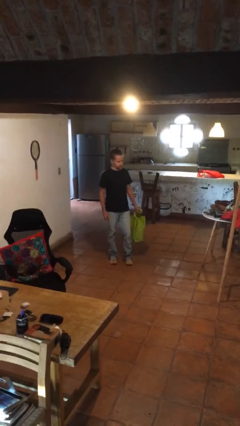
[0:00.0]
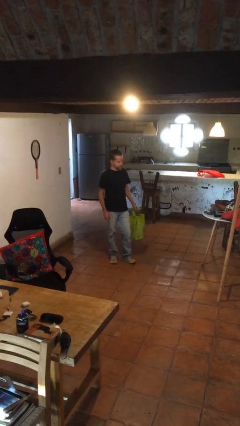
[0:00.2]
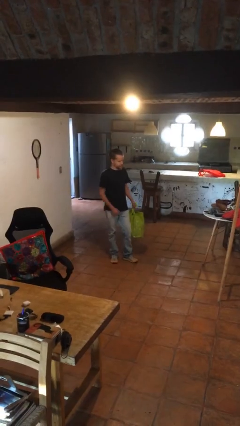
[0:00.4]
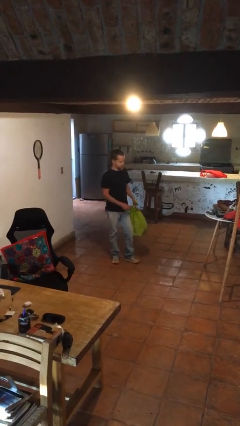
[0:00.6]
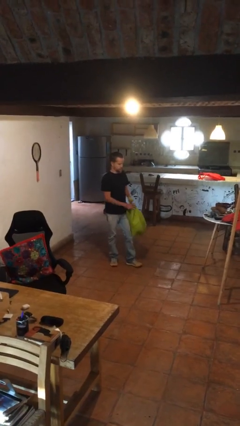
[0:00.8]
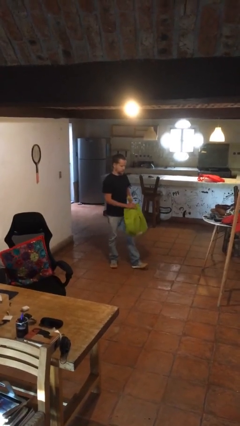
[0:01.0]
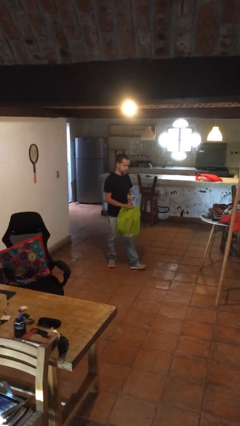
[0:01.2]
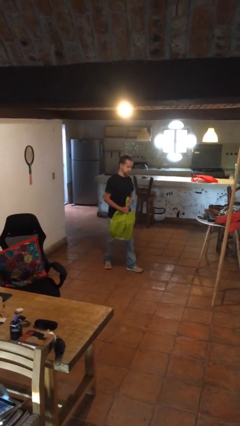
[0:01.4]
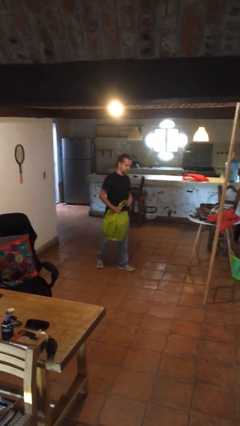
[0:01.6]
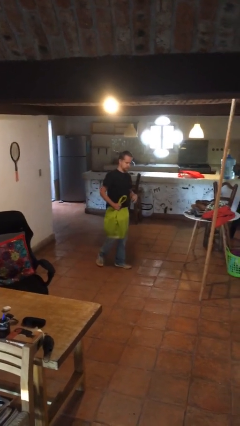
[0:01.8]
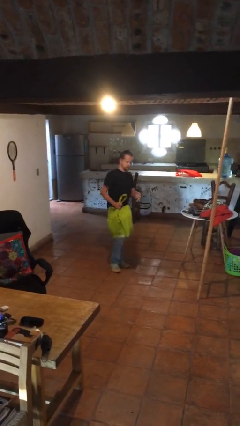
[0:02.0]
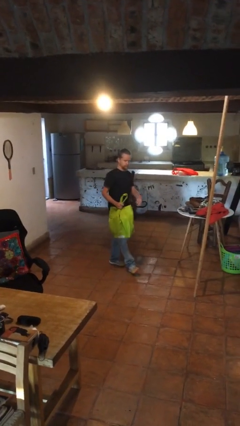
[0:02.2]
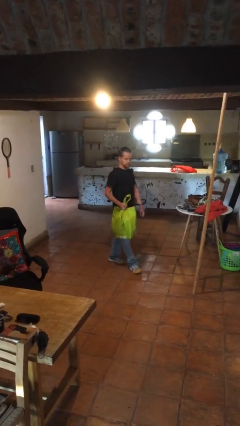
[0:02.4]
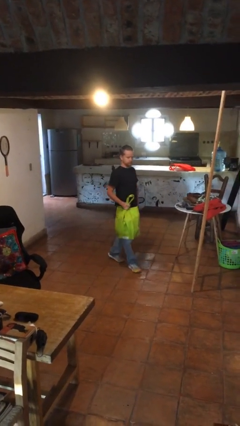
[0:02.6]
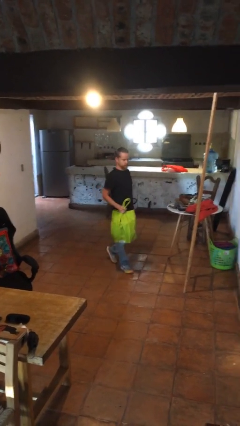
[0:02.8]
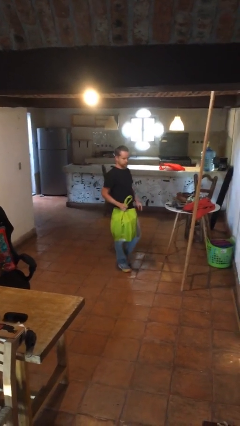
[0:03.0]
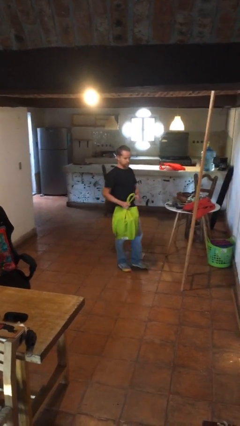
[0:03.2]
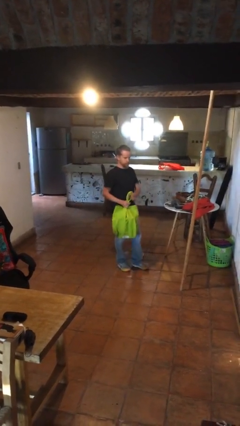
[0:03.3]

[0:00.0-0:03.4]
person carries groceries

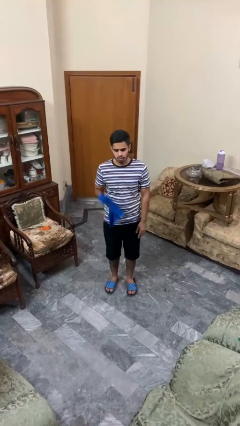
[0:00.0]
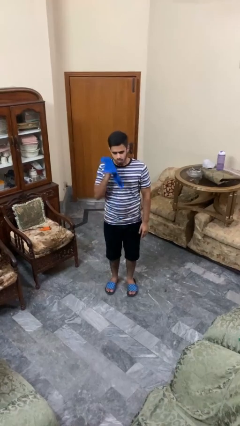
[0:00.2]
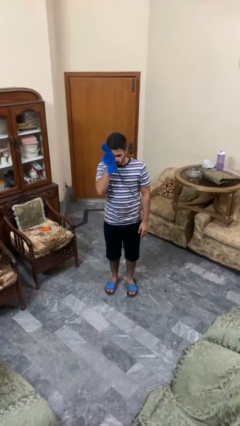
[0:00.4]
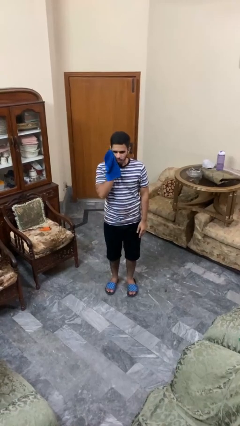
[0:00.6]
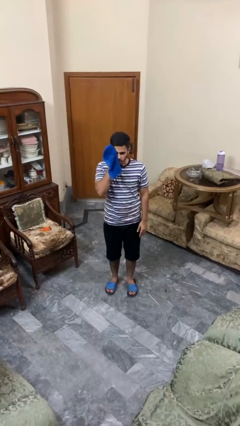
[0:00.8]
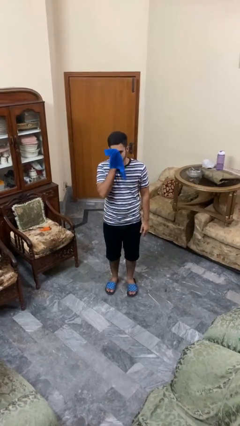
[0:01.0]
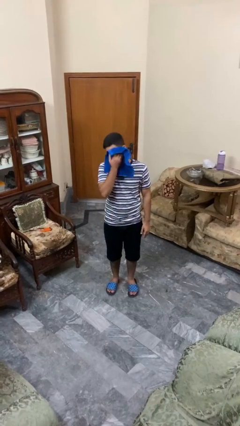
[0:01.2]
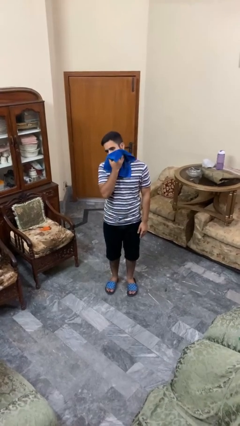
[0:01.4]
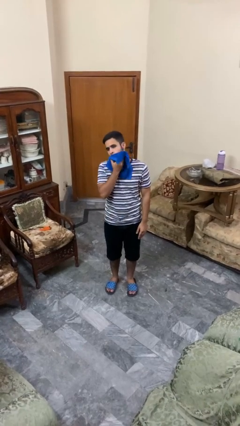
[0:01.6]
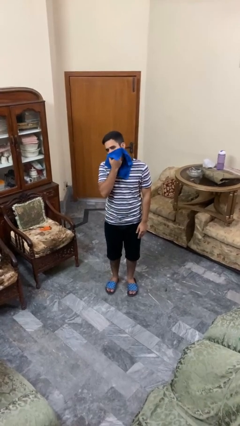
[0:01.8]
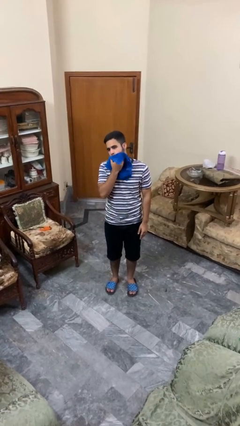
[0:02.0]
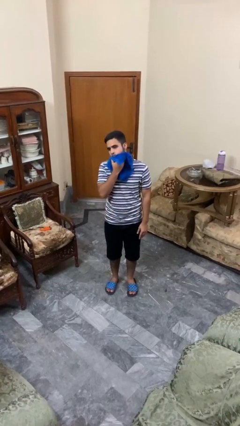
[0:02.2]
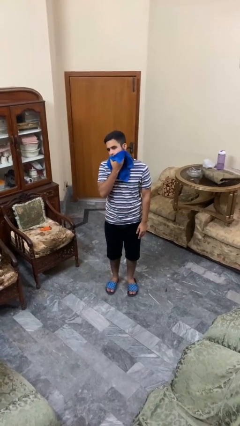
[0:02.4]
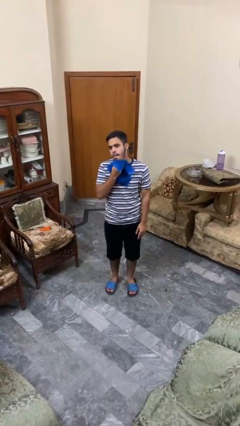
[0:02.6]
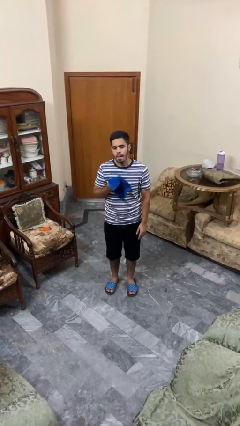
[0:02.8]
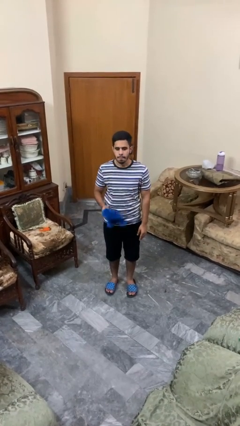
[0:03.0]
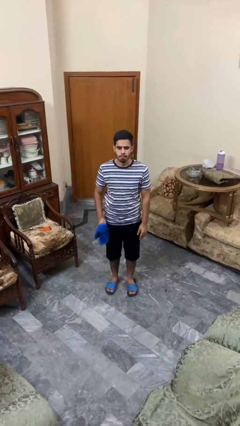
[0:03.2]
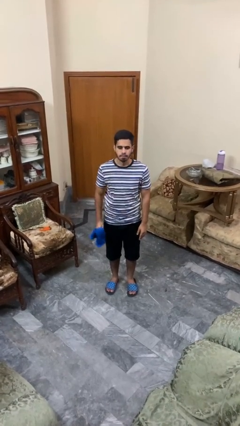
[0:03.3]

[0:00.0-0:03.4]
person wipes mouth with napkin

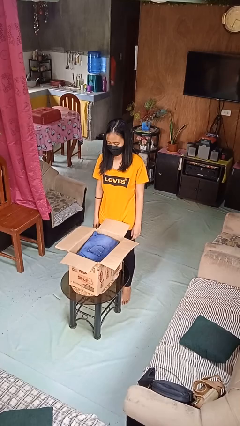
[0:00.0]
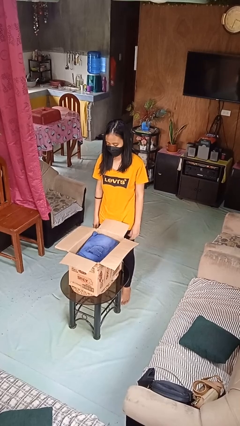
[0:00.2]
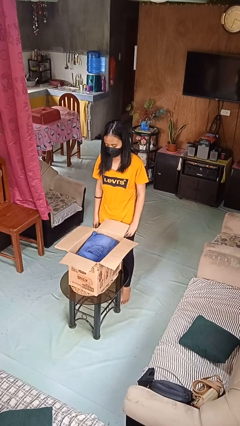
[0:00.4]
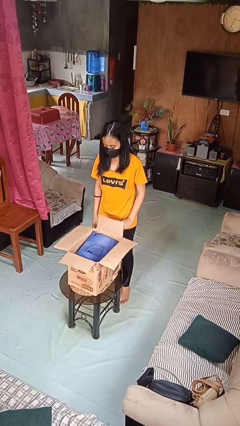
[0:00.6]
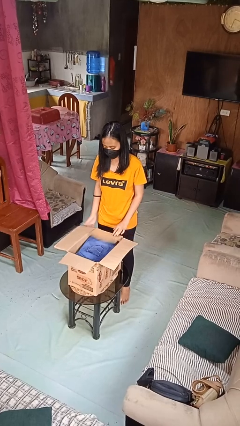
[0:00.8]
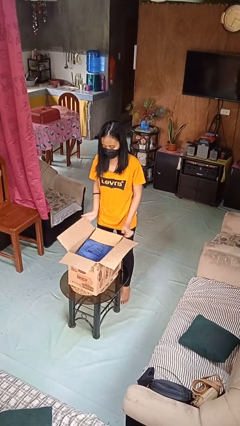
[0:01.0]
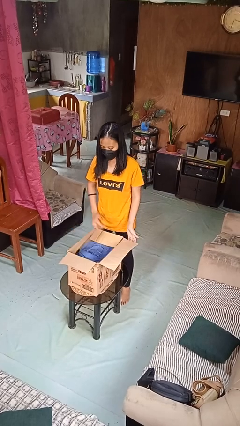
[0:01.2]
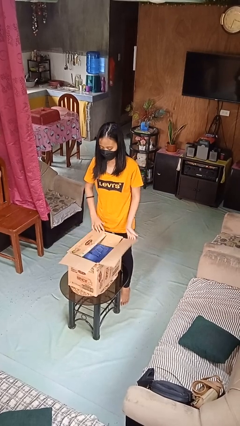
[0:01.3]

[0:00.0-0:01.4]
person closes box

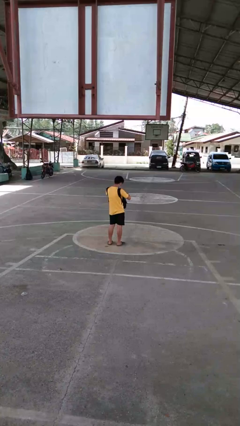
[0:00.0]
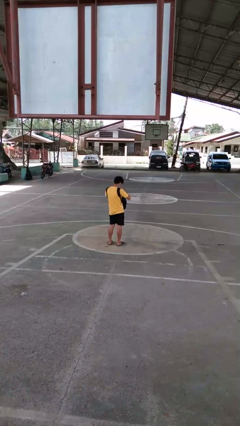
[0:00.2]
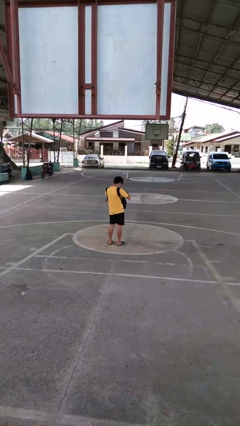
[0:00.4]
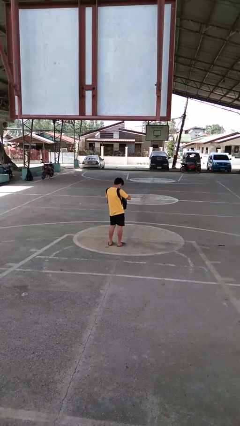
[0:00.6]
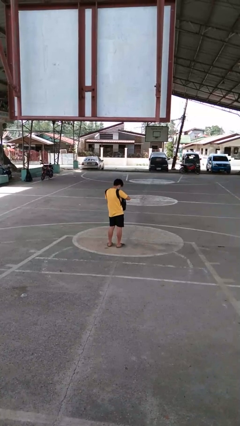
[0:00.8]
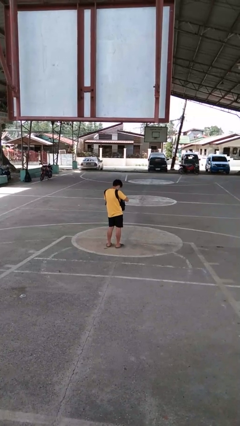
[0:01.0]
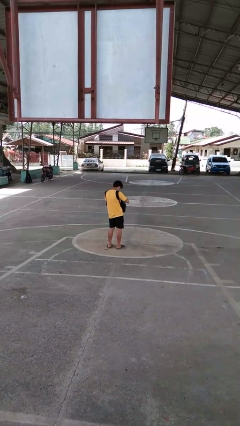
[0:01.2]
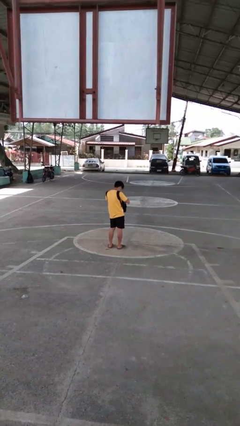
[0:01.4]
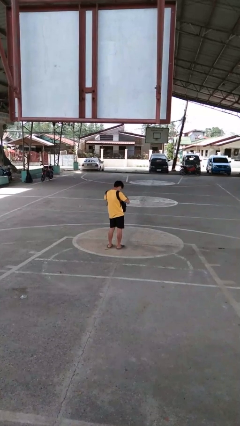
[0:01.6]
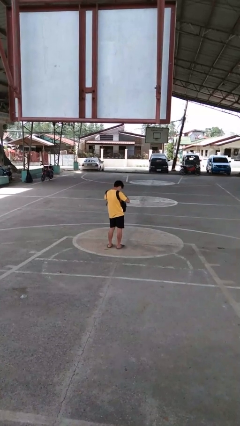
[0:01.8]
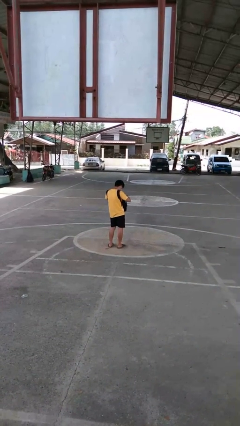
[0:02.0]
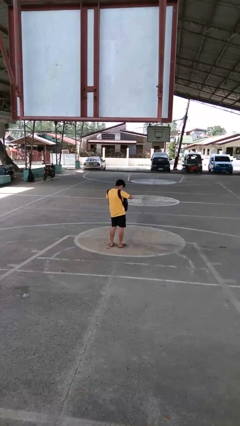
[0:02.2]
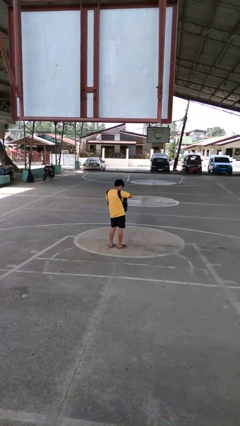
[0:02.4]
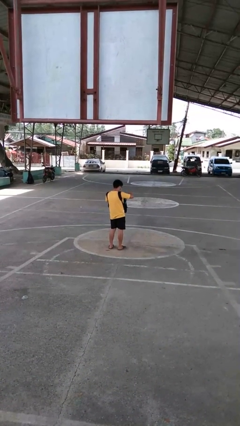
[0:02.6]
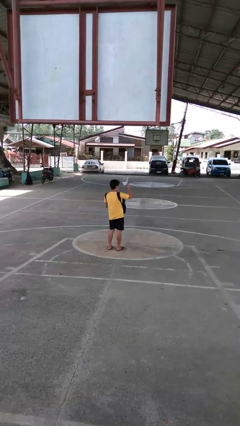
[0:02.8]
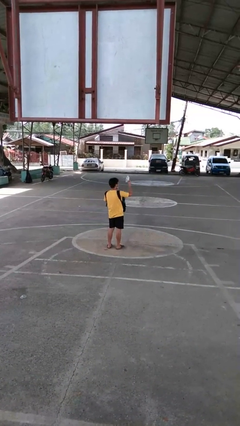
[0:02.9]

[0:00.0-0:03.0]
person searches in purse

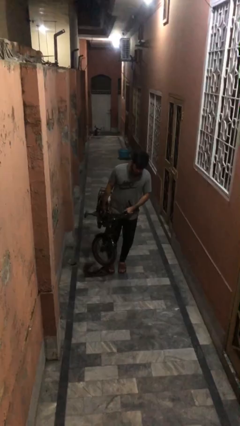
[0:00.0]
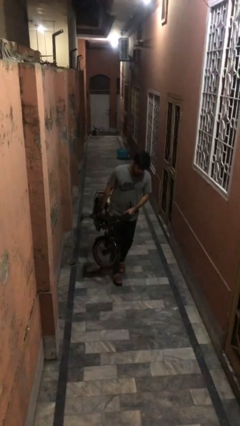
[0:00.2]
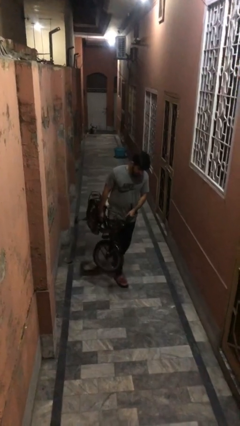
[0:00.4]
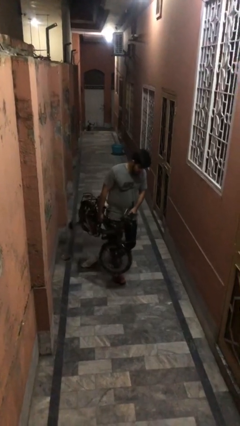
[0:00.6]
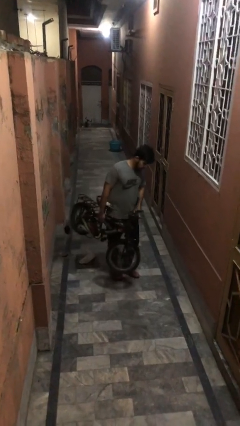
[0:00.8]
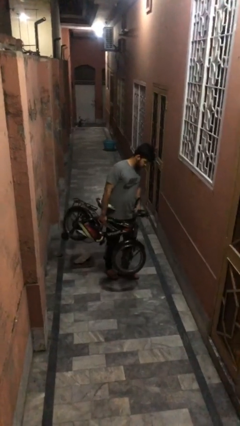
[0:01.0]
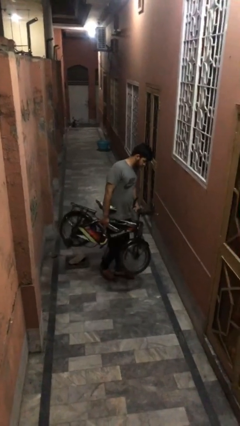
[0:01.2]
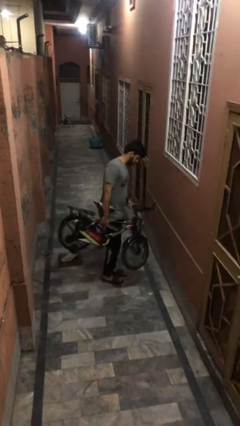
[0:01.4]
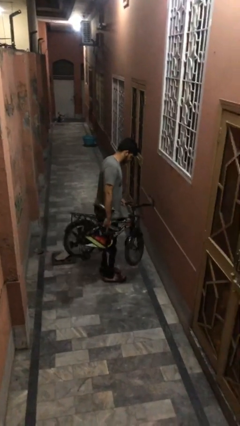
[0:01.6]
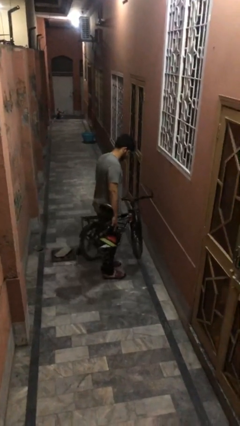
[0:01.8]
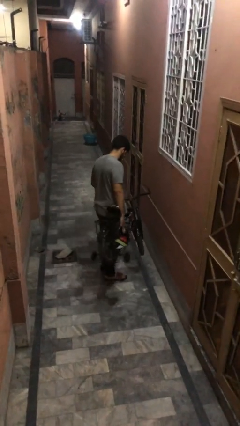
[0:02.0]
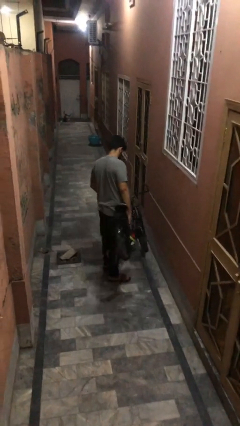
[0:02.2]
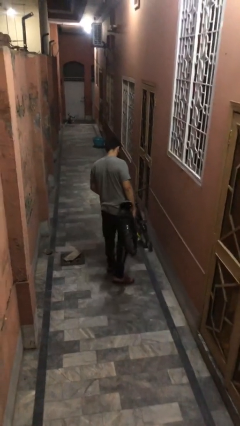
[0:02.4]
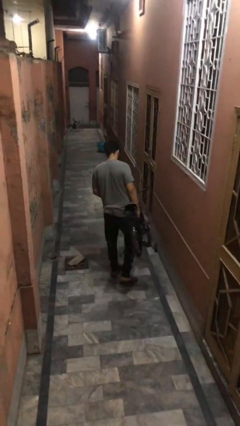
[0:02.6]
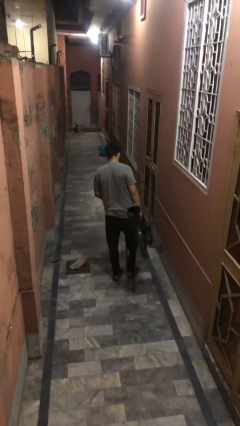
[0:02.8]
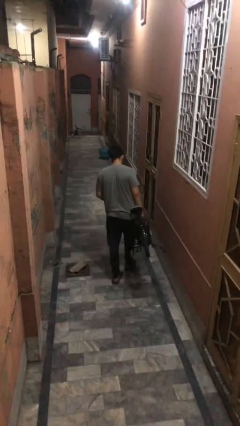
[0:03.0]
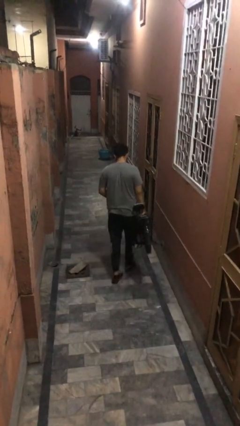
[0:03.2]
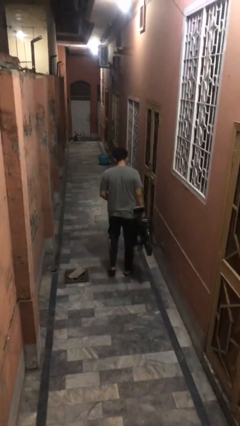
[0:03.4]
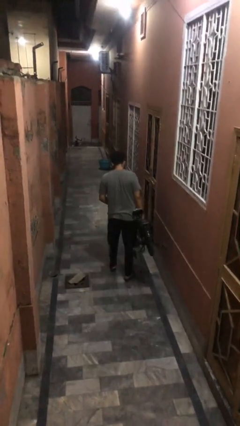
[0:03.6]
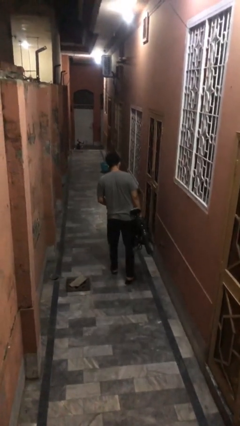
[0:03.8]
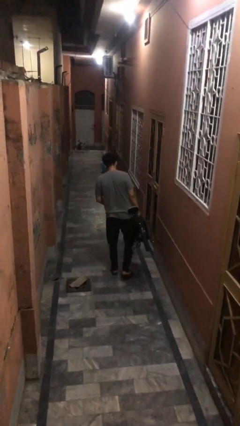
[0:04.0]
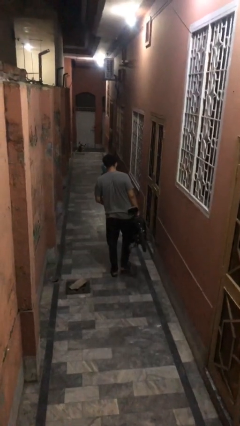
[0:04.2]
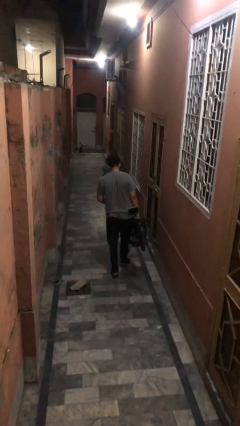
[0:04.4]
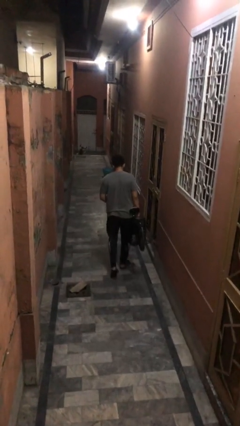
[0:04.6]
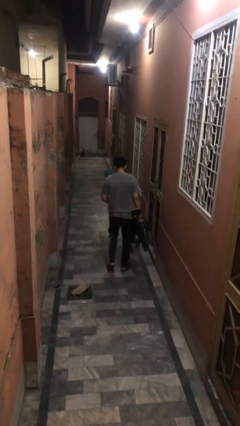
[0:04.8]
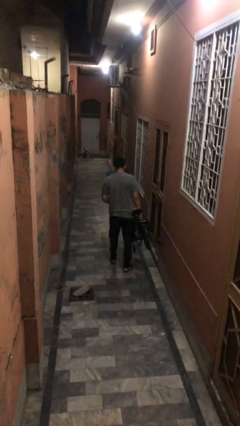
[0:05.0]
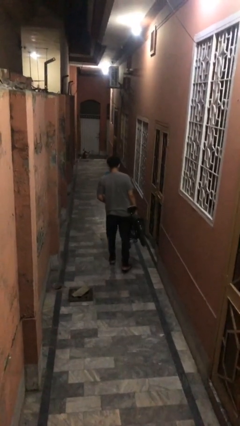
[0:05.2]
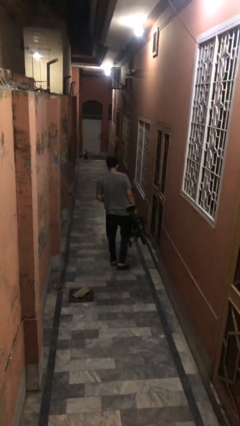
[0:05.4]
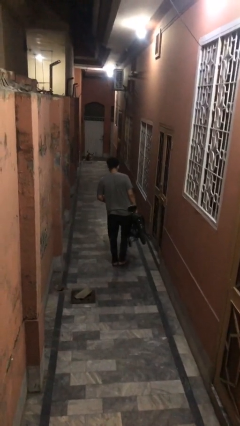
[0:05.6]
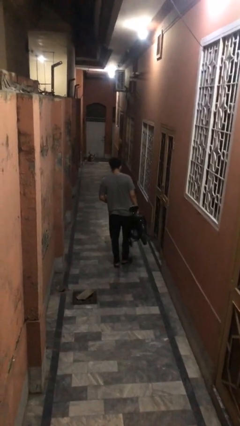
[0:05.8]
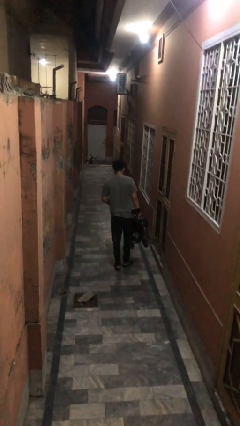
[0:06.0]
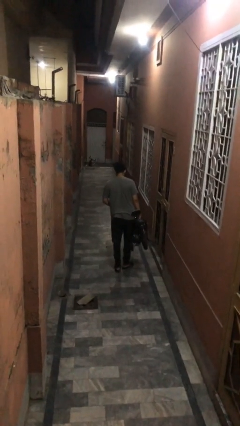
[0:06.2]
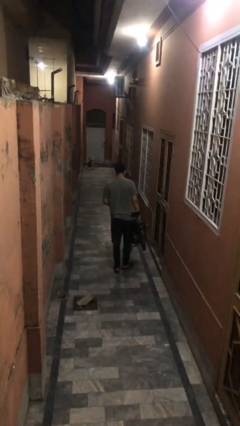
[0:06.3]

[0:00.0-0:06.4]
person carries bicycle
